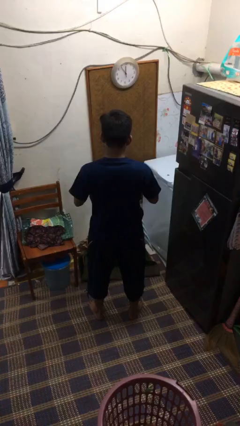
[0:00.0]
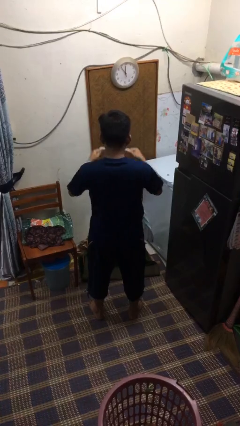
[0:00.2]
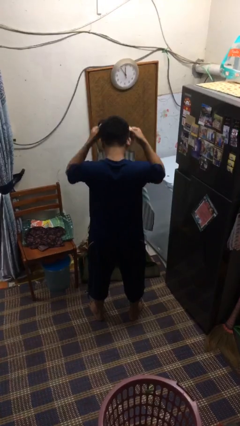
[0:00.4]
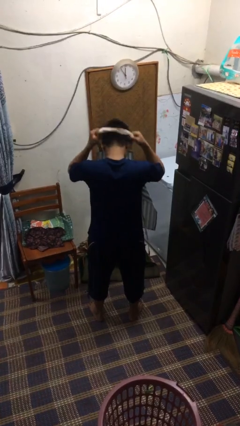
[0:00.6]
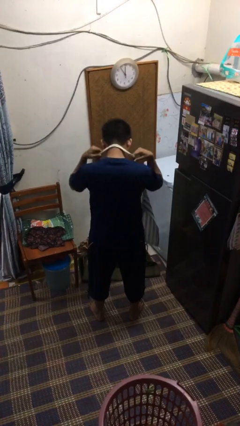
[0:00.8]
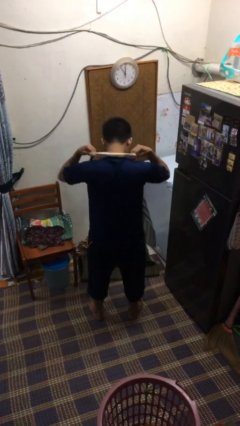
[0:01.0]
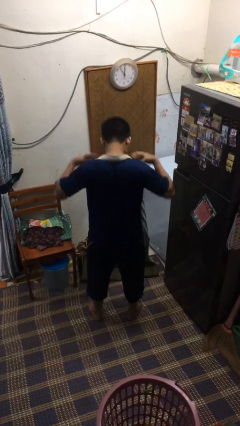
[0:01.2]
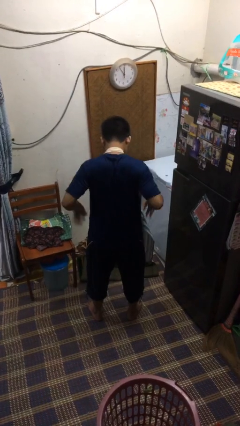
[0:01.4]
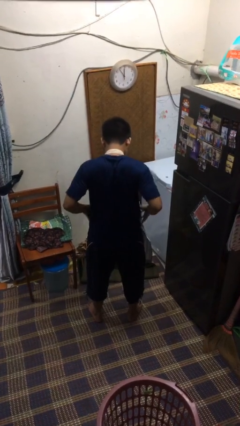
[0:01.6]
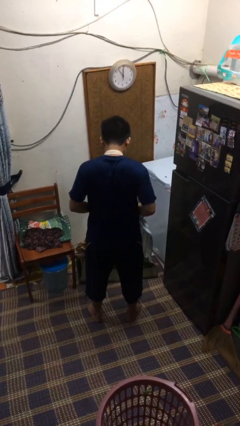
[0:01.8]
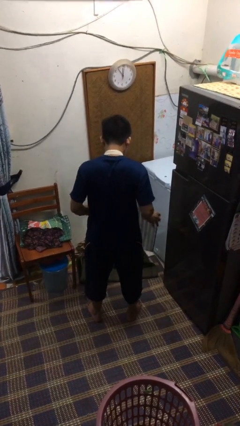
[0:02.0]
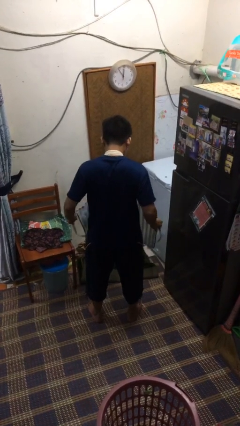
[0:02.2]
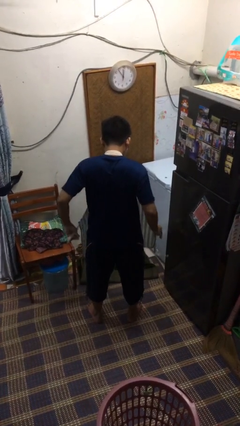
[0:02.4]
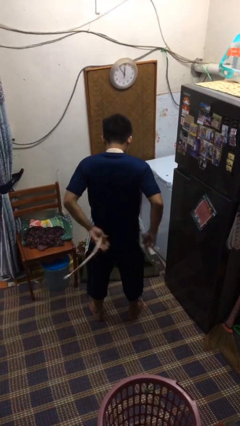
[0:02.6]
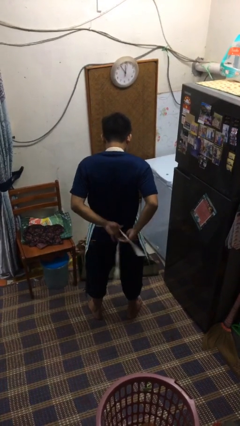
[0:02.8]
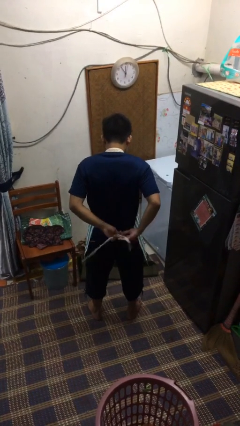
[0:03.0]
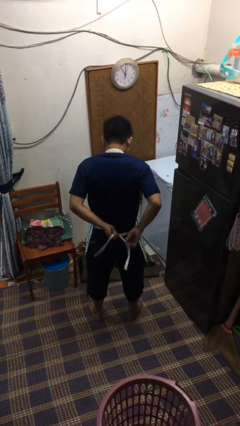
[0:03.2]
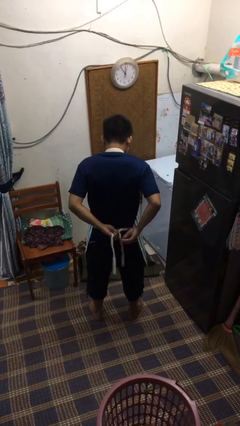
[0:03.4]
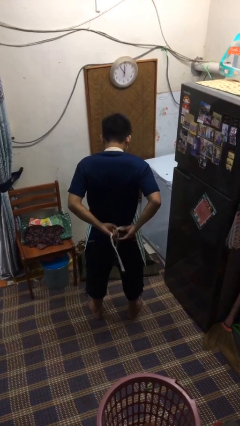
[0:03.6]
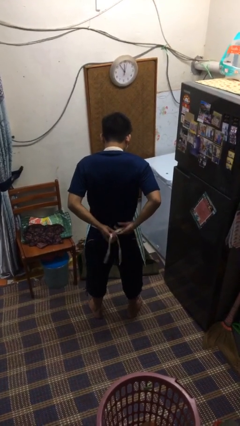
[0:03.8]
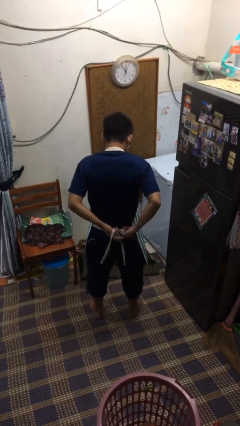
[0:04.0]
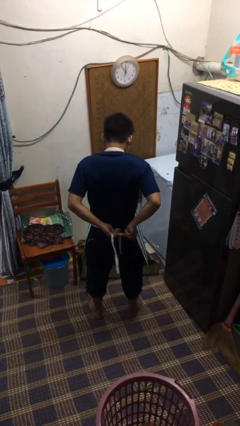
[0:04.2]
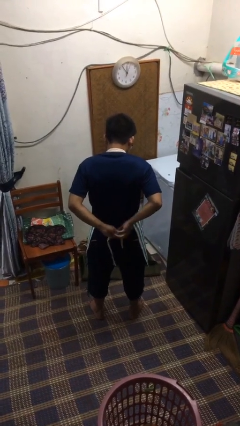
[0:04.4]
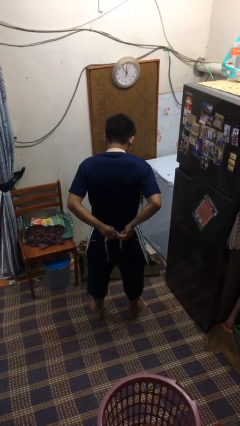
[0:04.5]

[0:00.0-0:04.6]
person puts on apron

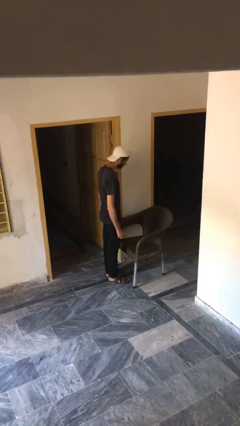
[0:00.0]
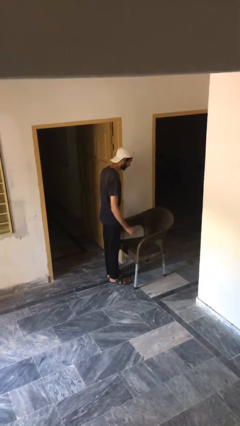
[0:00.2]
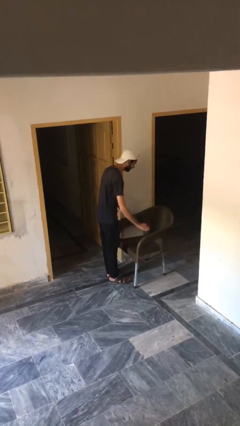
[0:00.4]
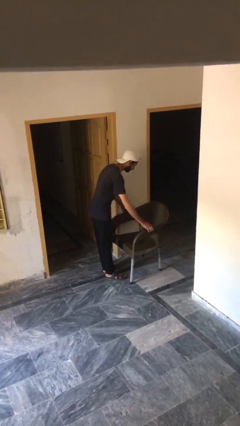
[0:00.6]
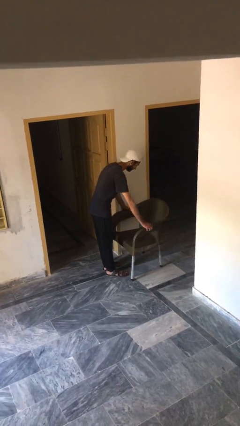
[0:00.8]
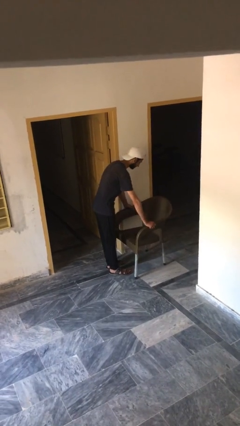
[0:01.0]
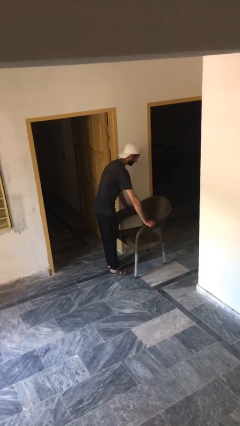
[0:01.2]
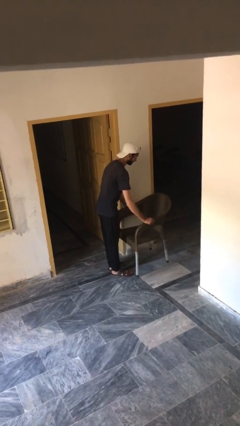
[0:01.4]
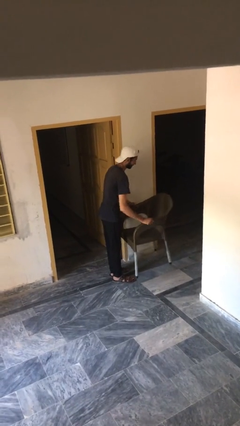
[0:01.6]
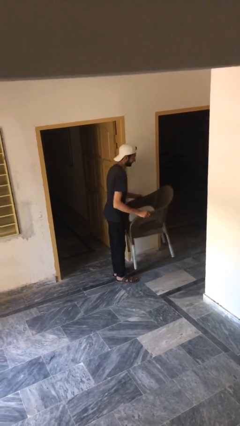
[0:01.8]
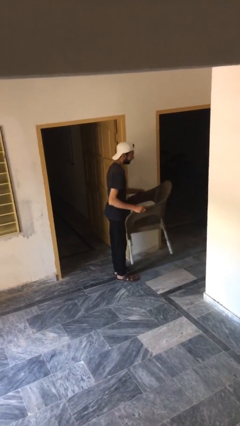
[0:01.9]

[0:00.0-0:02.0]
person picks up object from floor

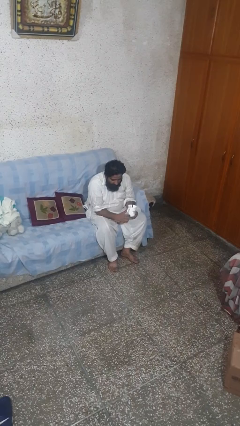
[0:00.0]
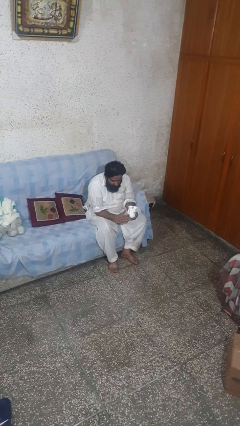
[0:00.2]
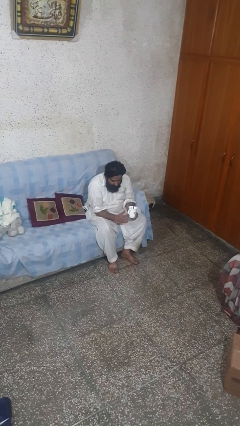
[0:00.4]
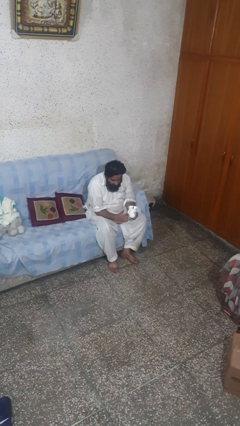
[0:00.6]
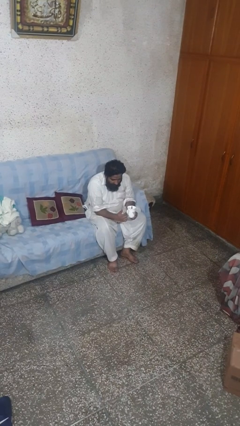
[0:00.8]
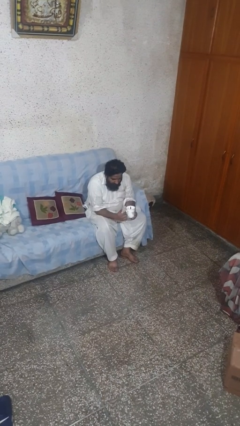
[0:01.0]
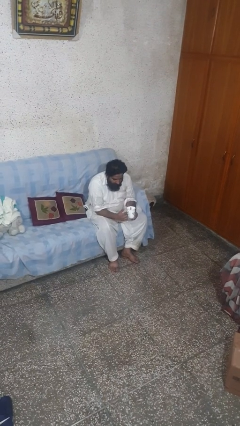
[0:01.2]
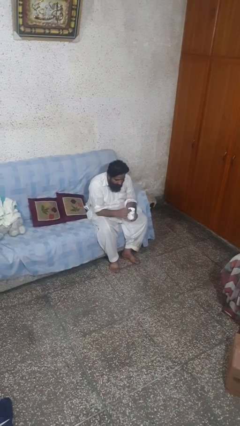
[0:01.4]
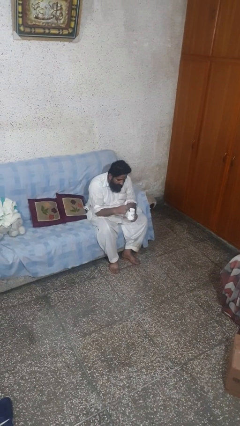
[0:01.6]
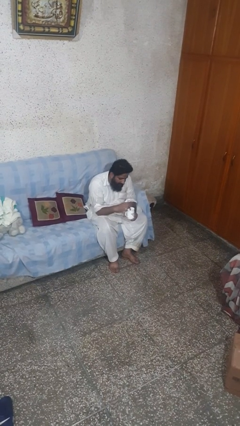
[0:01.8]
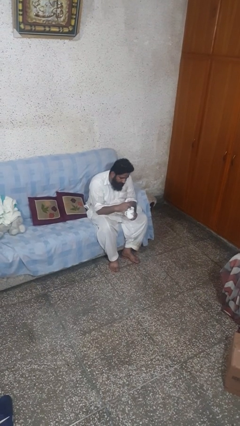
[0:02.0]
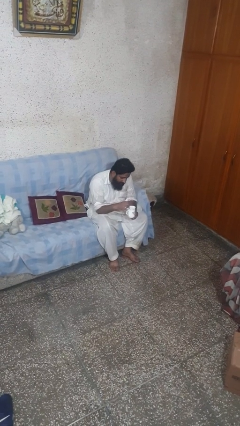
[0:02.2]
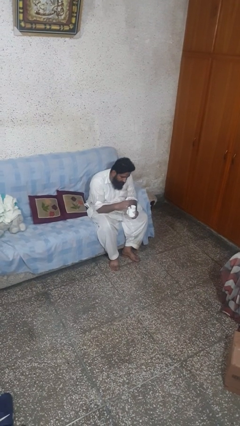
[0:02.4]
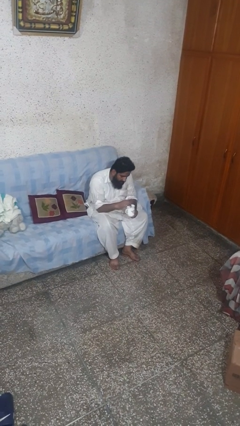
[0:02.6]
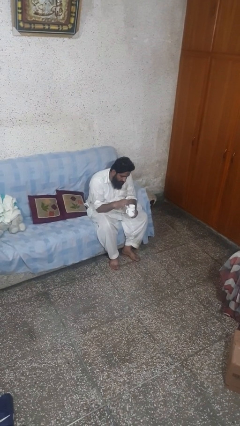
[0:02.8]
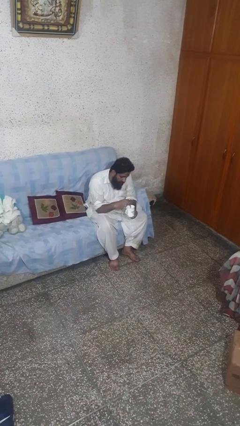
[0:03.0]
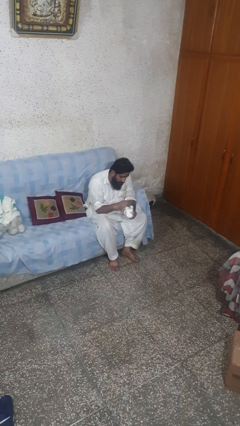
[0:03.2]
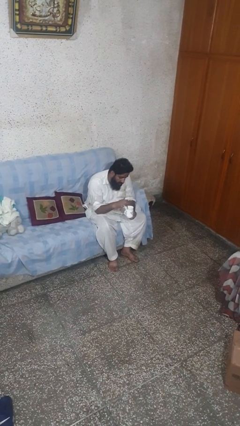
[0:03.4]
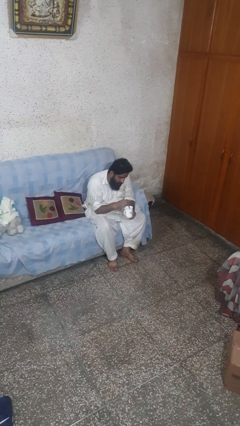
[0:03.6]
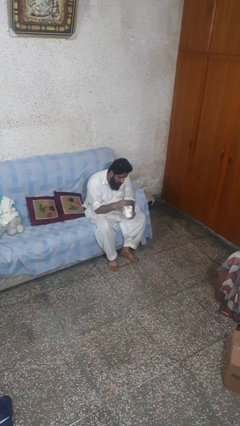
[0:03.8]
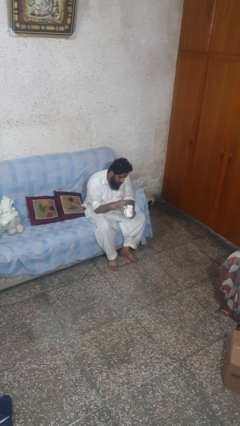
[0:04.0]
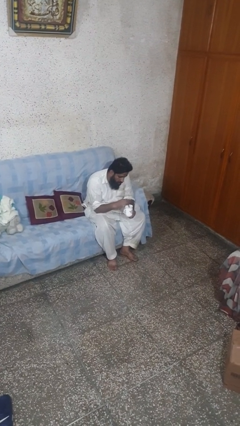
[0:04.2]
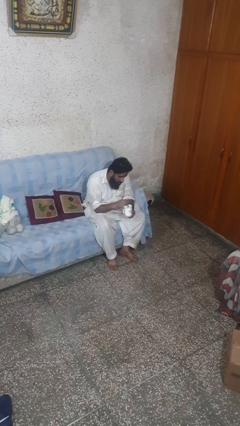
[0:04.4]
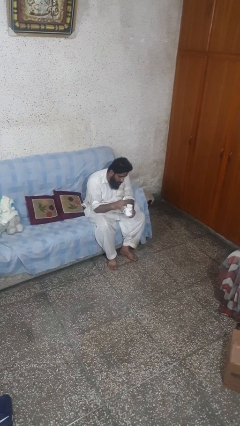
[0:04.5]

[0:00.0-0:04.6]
person stirs mug

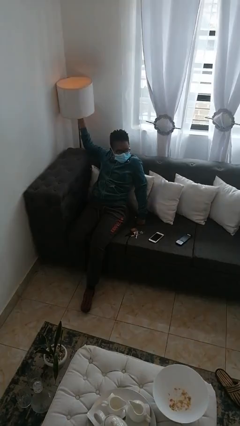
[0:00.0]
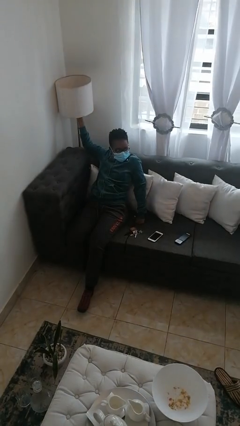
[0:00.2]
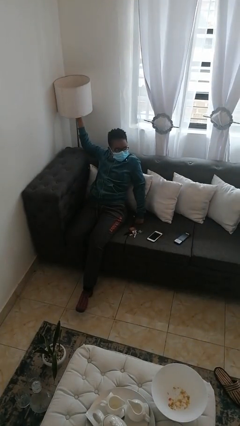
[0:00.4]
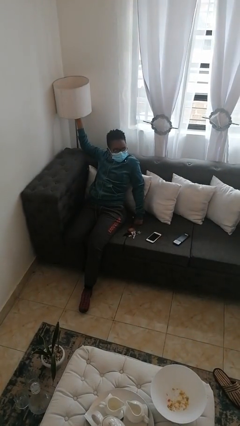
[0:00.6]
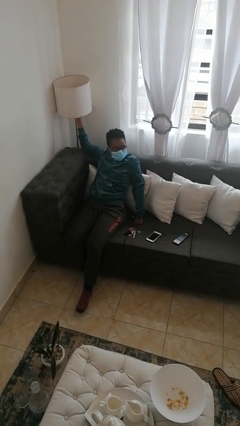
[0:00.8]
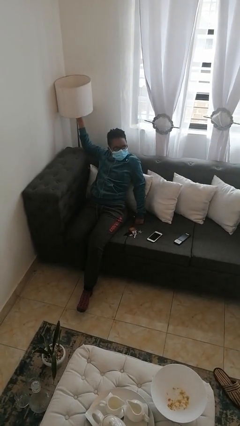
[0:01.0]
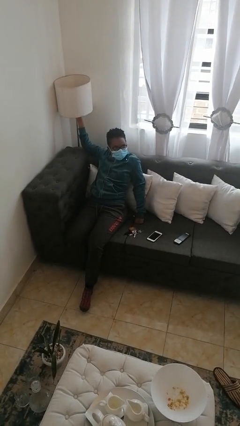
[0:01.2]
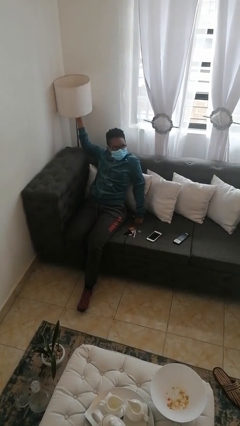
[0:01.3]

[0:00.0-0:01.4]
person turns off lamp

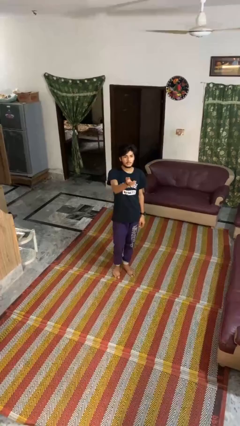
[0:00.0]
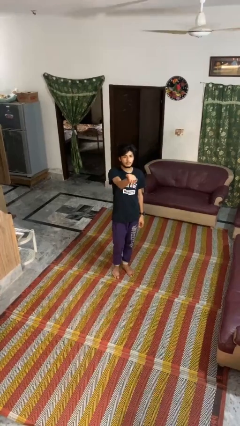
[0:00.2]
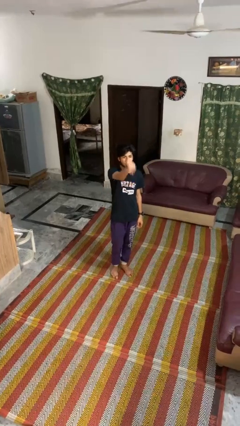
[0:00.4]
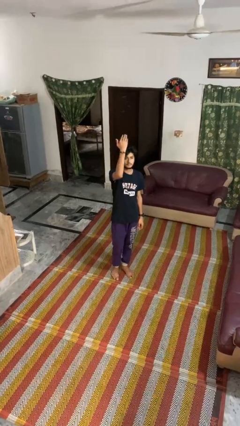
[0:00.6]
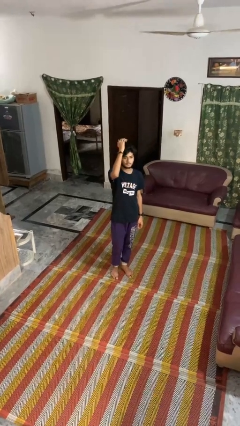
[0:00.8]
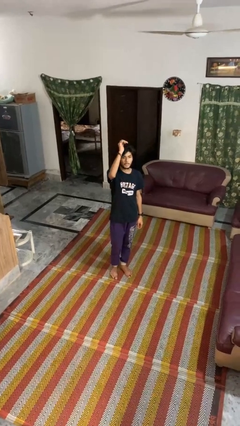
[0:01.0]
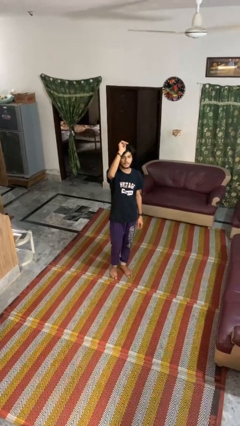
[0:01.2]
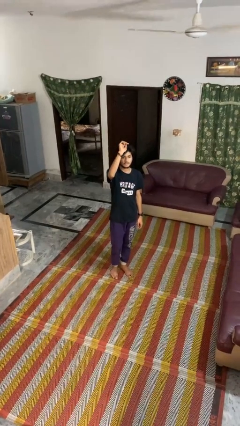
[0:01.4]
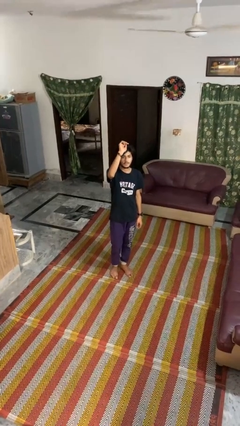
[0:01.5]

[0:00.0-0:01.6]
person gestures swipe up

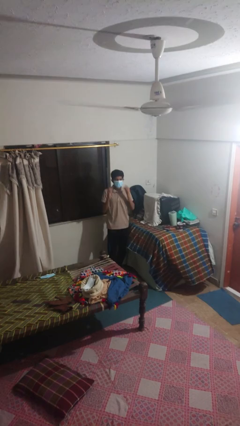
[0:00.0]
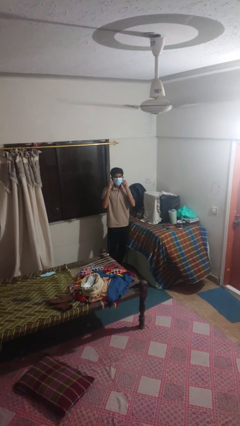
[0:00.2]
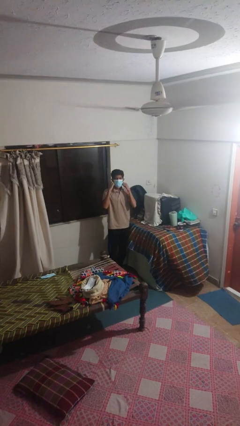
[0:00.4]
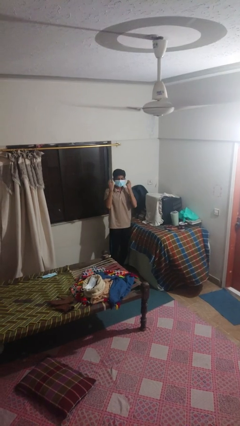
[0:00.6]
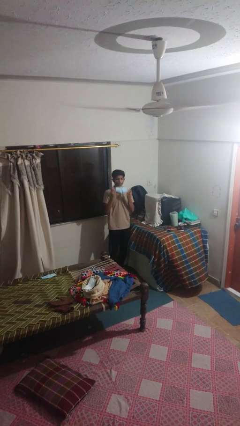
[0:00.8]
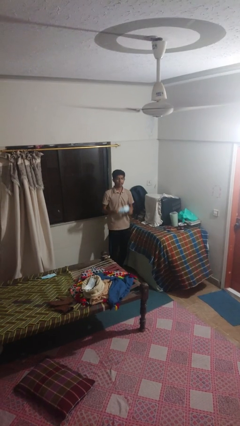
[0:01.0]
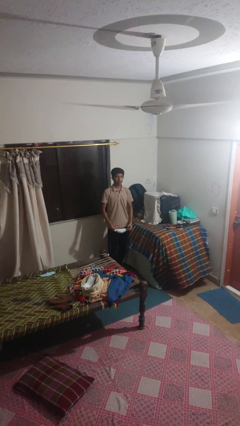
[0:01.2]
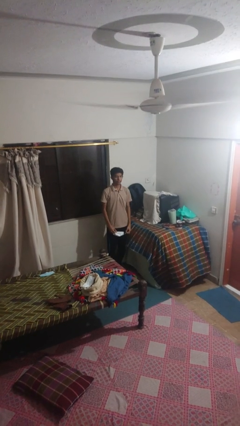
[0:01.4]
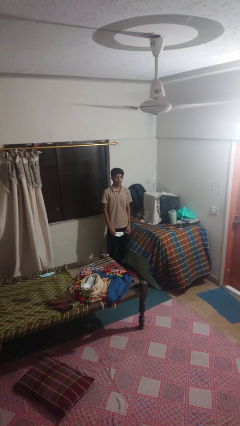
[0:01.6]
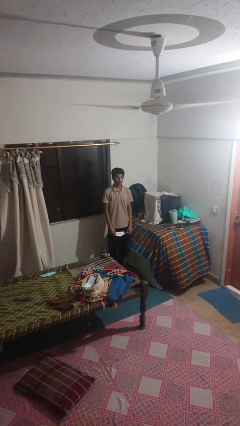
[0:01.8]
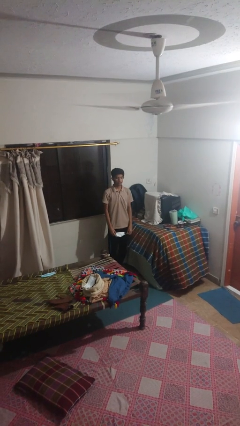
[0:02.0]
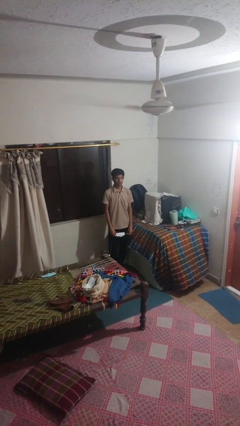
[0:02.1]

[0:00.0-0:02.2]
person takes off facemask

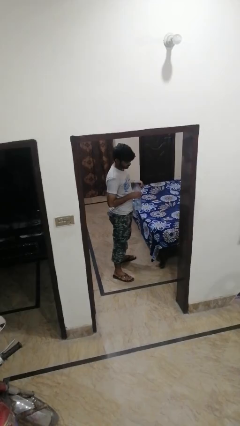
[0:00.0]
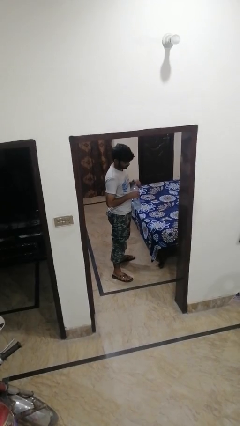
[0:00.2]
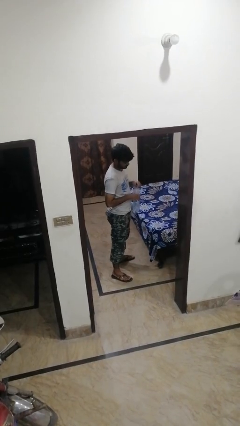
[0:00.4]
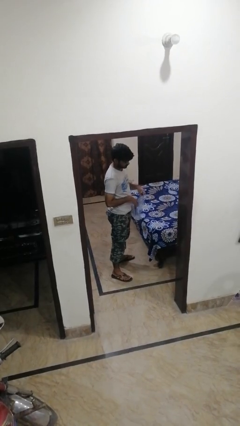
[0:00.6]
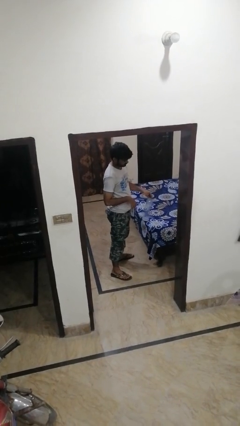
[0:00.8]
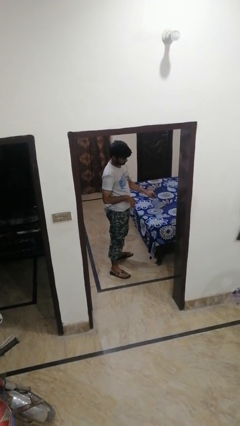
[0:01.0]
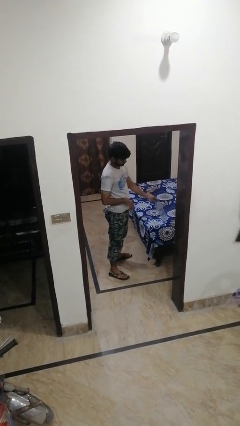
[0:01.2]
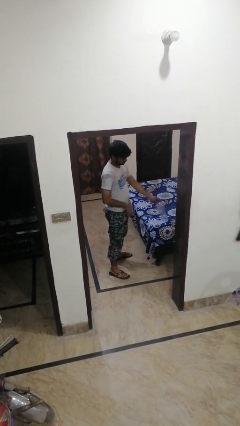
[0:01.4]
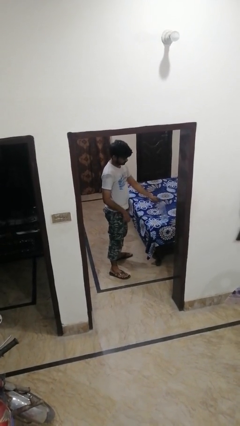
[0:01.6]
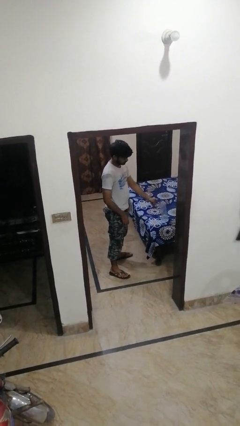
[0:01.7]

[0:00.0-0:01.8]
person puts down object on bed
